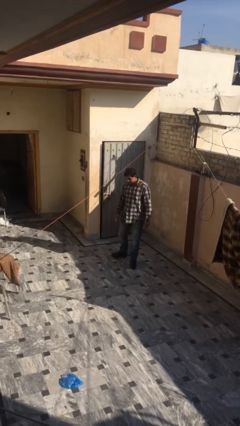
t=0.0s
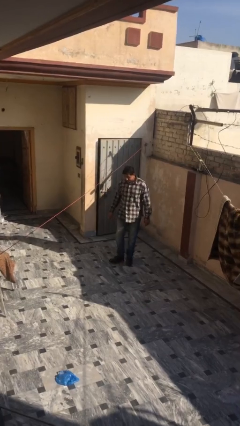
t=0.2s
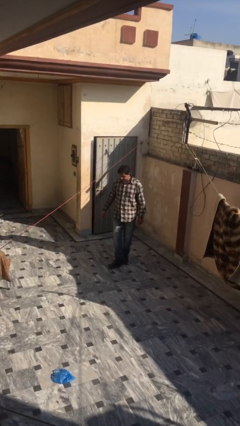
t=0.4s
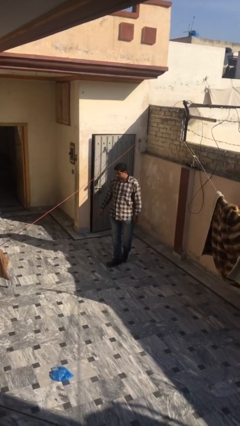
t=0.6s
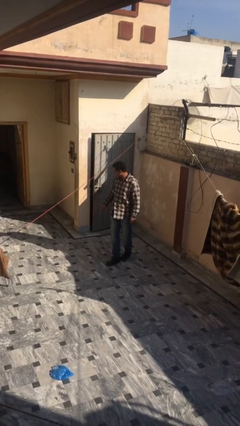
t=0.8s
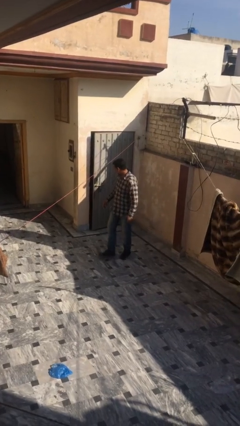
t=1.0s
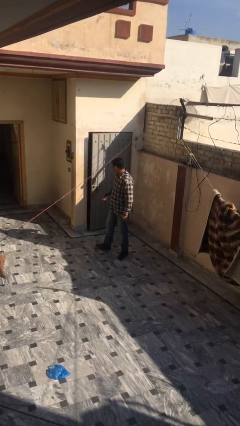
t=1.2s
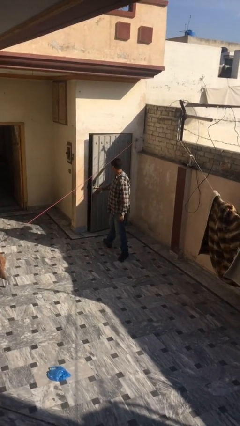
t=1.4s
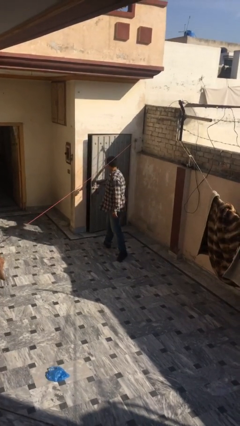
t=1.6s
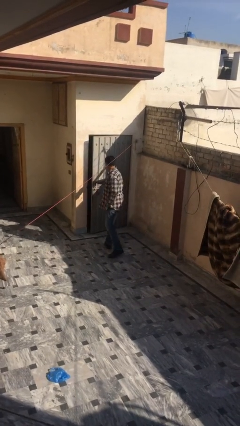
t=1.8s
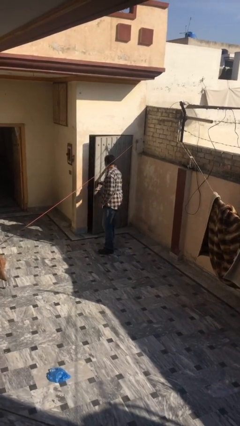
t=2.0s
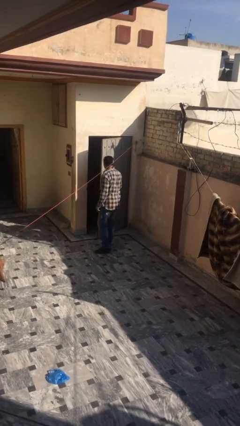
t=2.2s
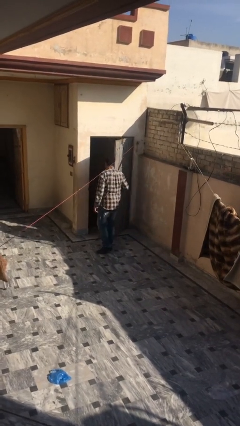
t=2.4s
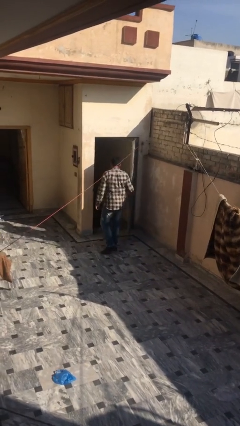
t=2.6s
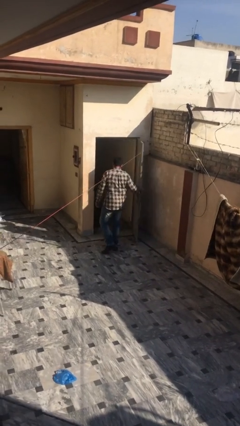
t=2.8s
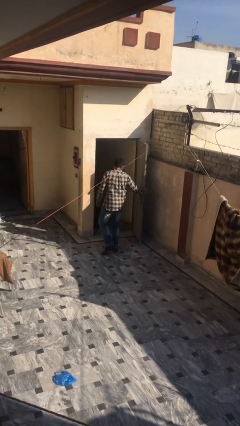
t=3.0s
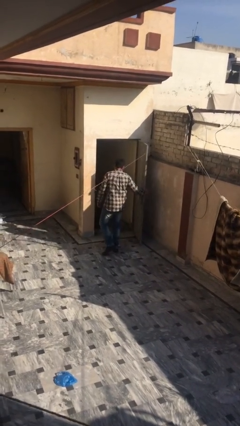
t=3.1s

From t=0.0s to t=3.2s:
person opens facility door

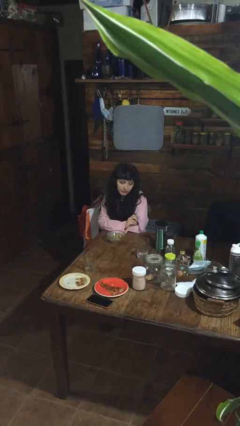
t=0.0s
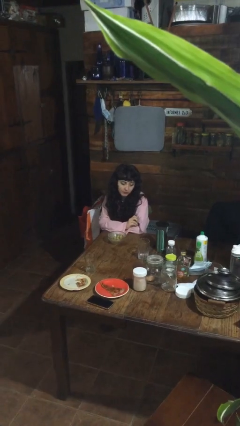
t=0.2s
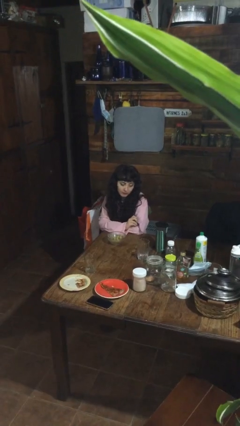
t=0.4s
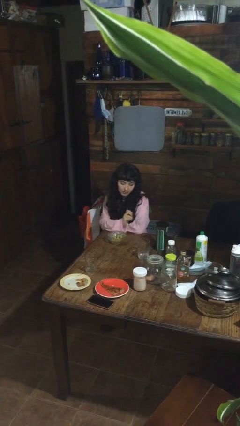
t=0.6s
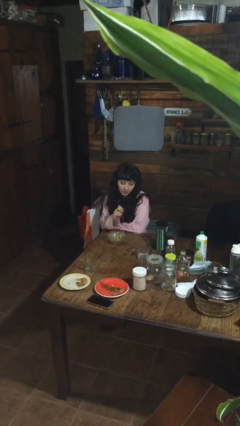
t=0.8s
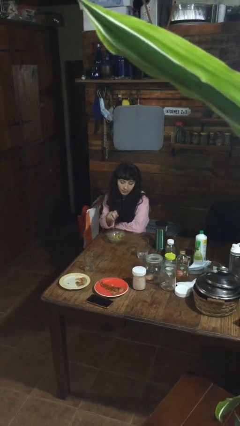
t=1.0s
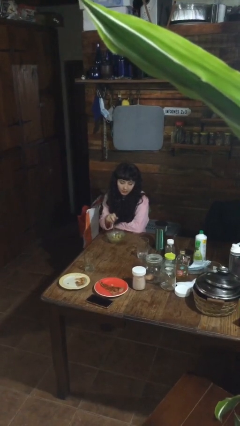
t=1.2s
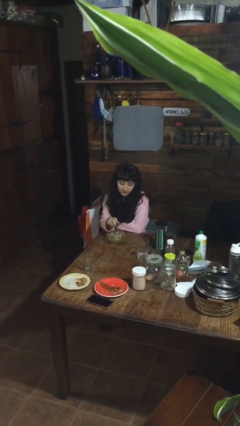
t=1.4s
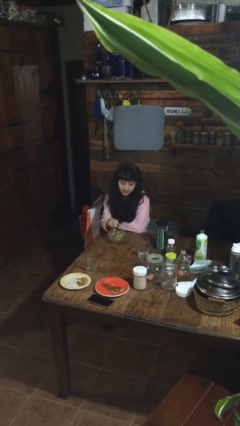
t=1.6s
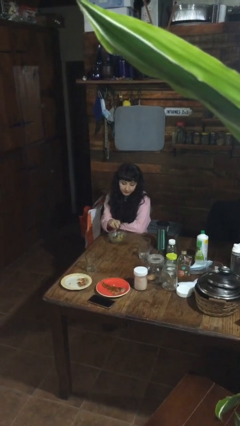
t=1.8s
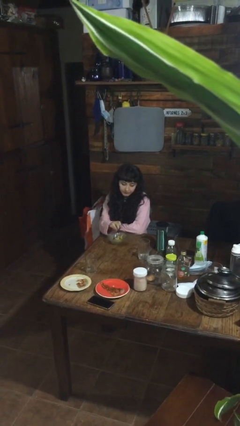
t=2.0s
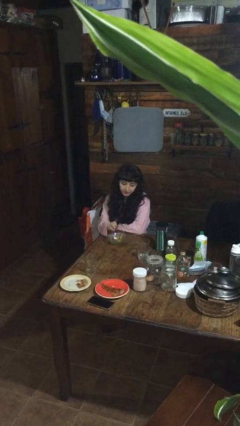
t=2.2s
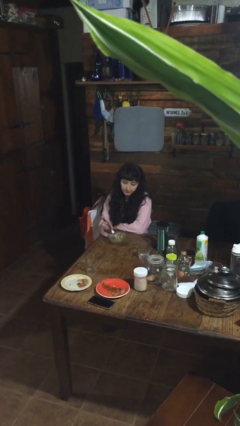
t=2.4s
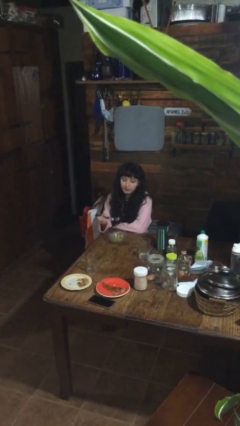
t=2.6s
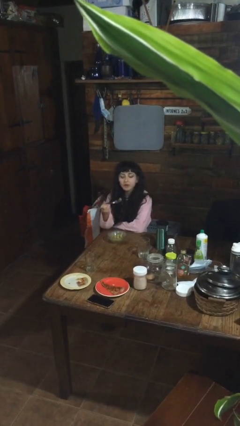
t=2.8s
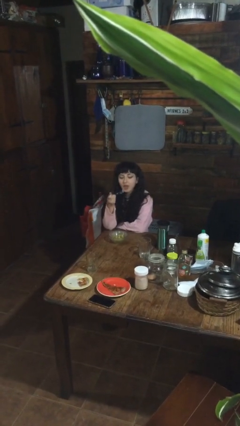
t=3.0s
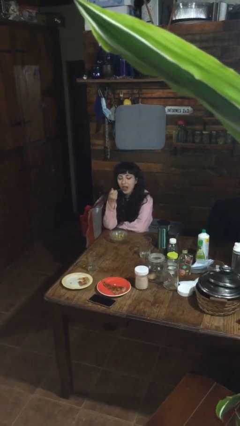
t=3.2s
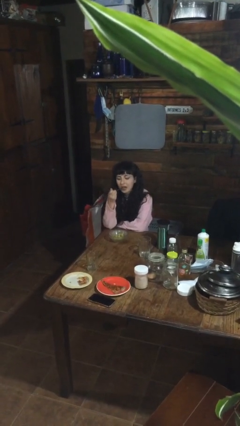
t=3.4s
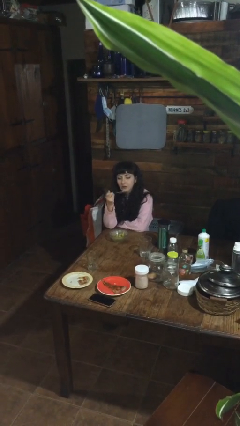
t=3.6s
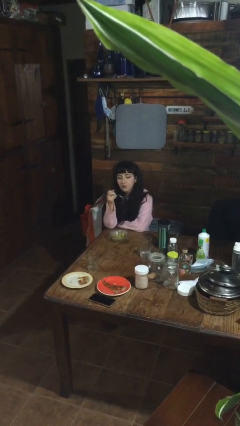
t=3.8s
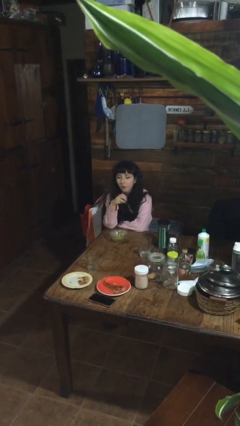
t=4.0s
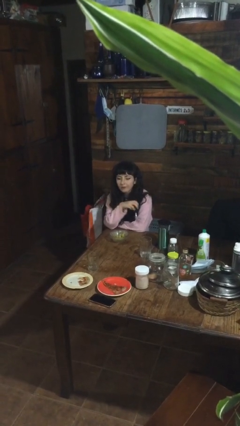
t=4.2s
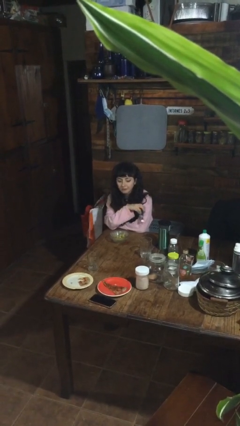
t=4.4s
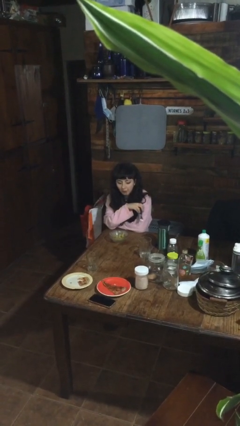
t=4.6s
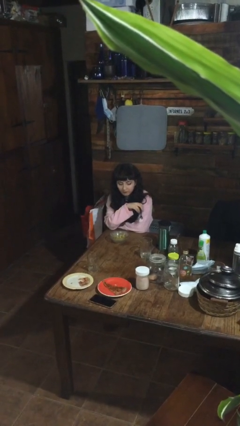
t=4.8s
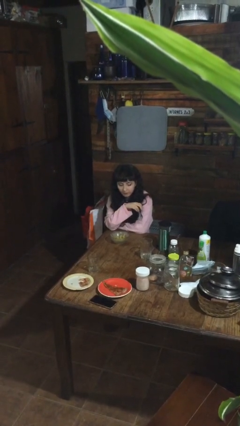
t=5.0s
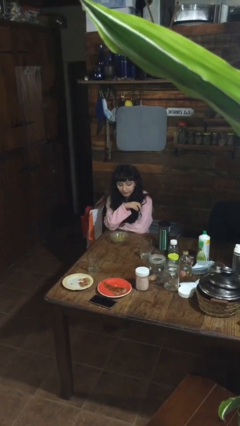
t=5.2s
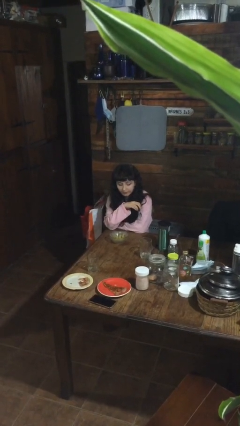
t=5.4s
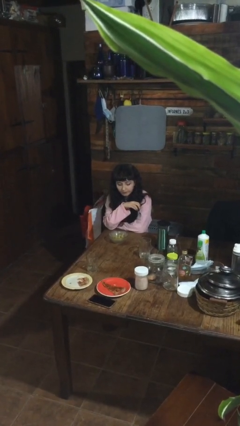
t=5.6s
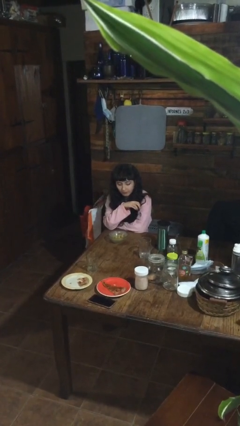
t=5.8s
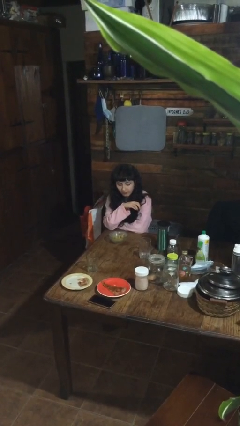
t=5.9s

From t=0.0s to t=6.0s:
person eats with utensil

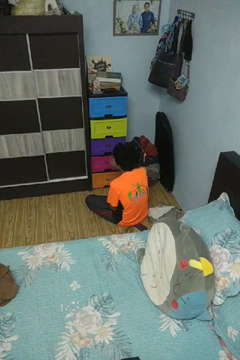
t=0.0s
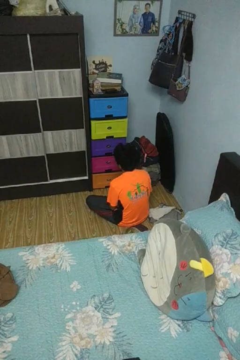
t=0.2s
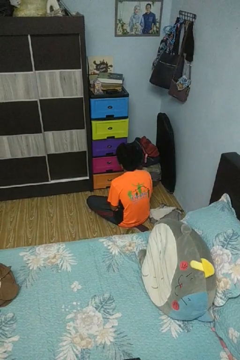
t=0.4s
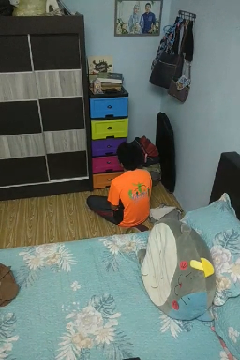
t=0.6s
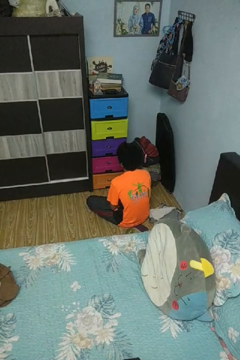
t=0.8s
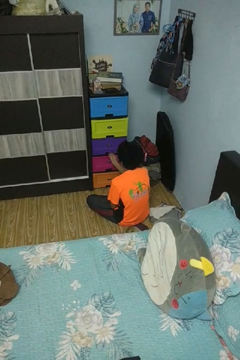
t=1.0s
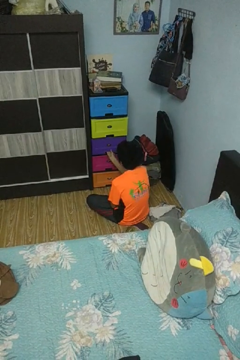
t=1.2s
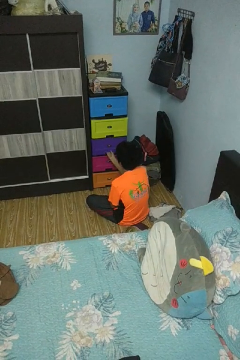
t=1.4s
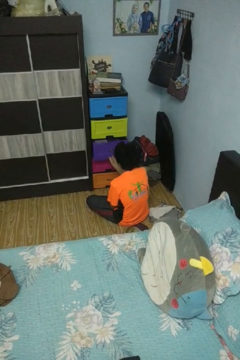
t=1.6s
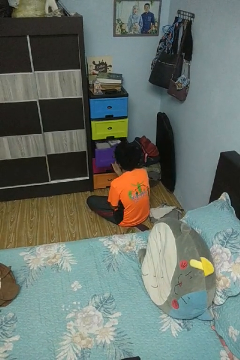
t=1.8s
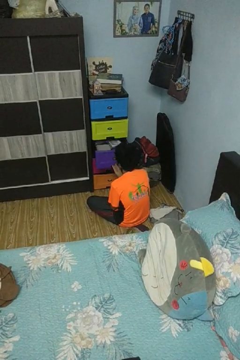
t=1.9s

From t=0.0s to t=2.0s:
person opens dresser drawer

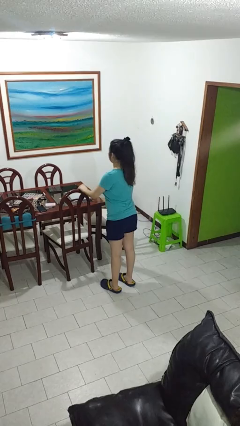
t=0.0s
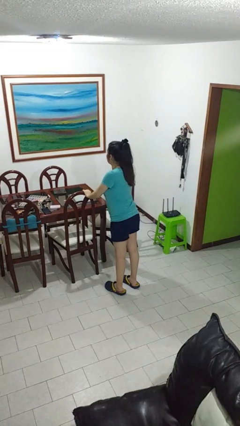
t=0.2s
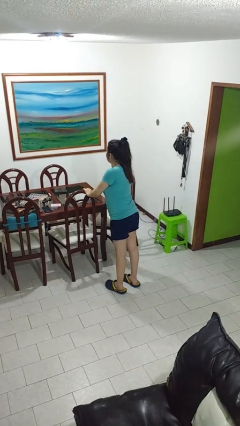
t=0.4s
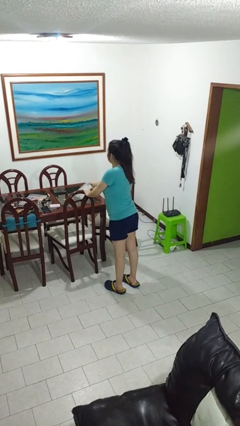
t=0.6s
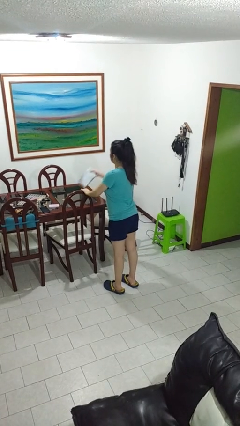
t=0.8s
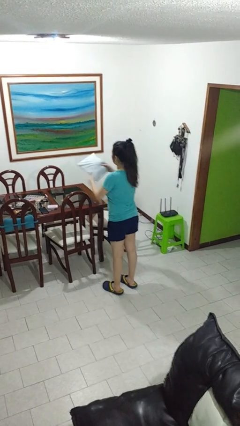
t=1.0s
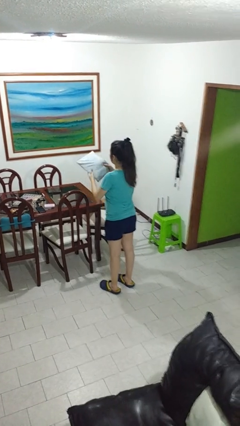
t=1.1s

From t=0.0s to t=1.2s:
person picks up object from table

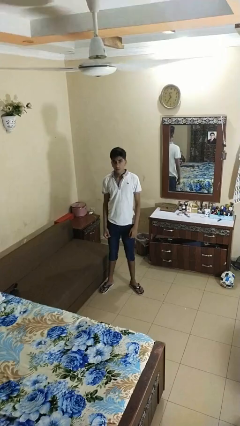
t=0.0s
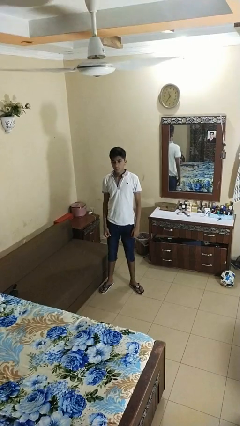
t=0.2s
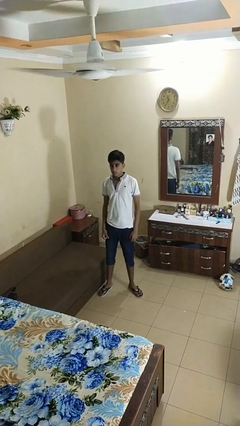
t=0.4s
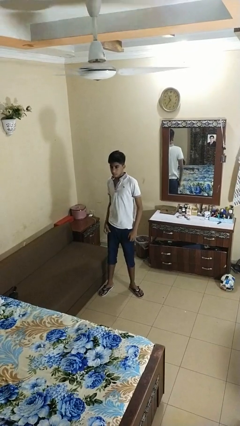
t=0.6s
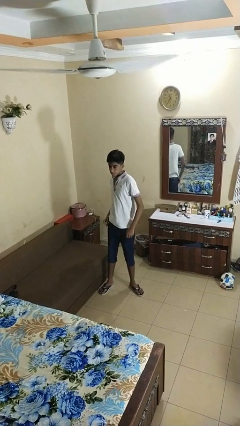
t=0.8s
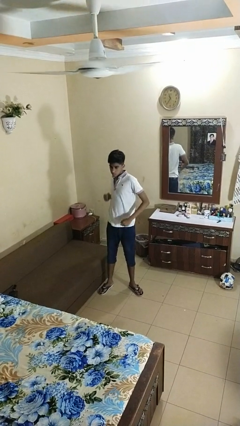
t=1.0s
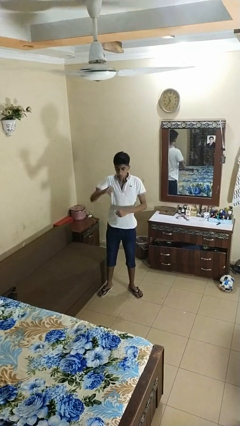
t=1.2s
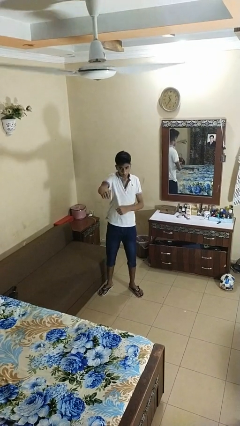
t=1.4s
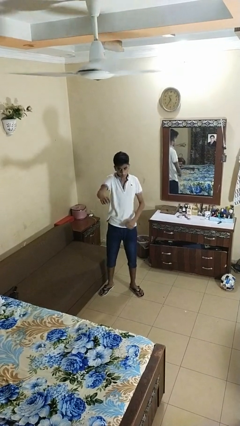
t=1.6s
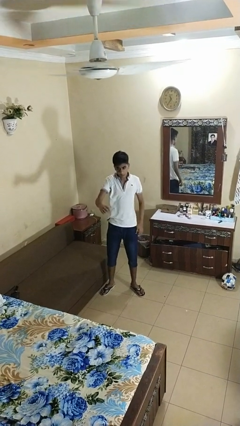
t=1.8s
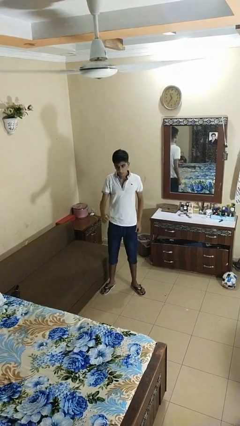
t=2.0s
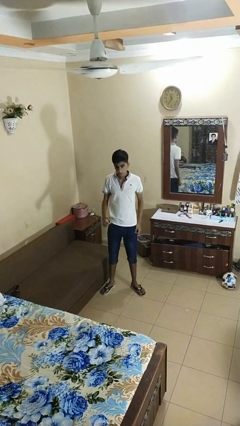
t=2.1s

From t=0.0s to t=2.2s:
person punches

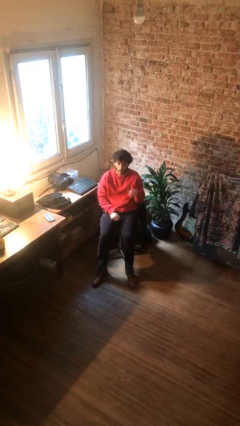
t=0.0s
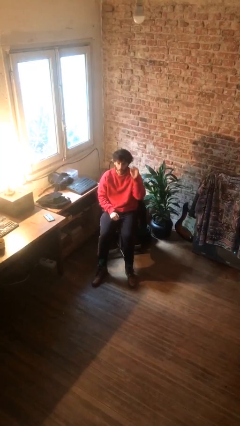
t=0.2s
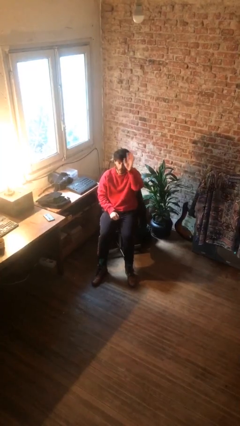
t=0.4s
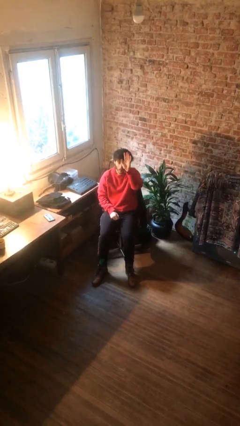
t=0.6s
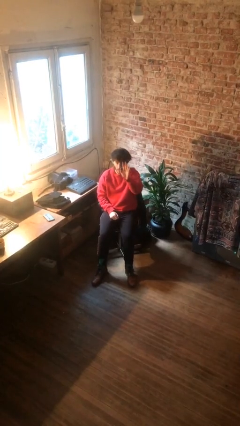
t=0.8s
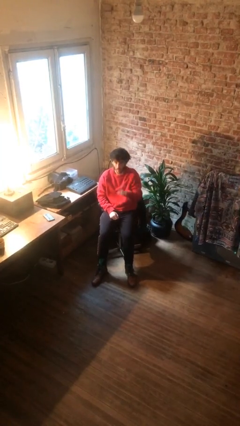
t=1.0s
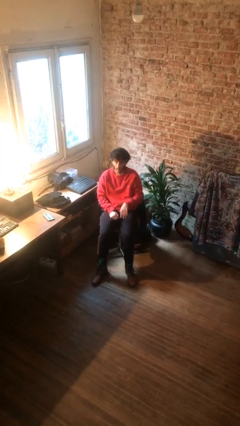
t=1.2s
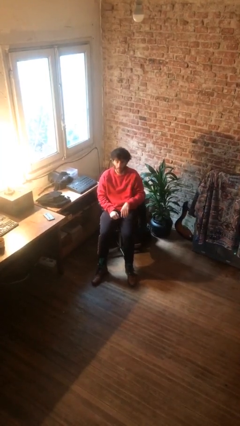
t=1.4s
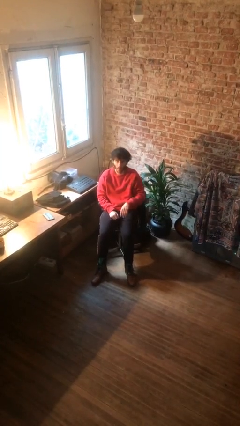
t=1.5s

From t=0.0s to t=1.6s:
person gestures swipe down

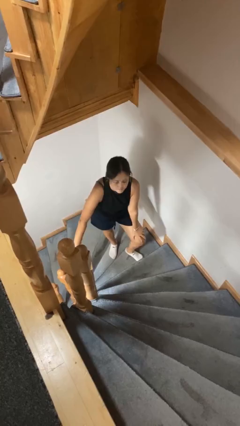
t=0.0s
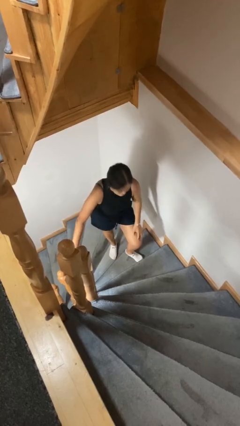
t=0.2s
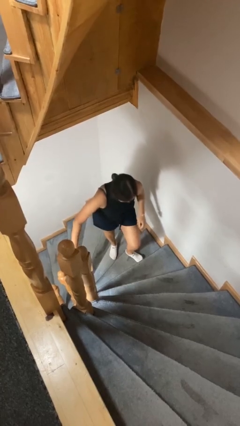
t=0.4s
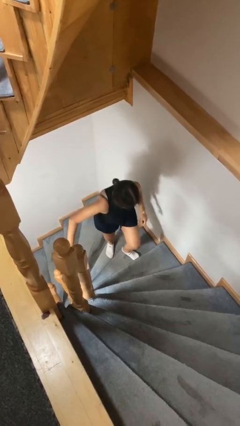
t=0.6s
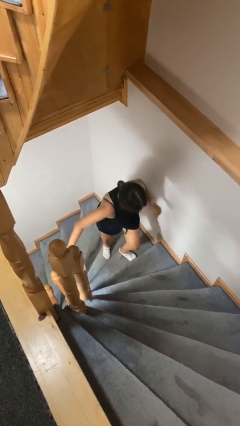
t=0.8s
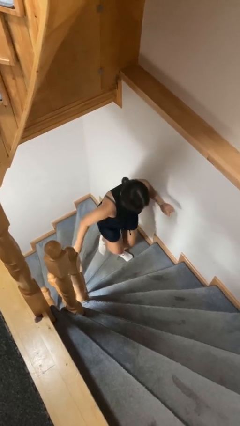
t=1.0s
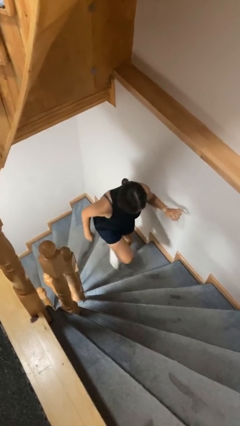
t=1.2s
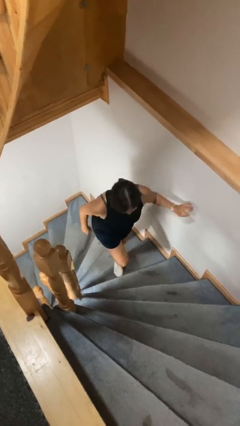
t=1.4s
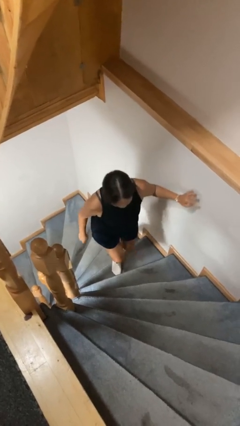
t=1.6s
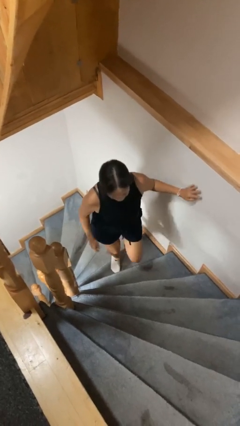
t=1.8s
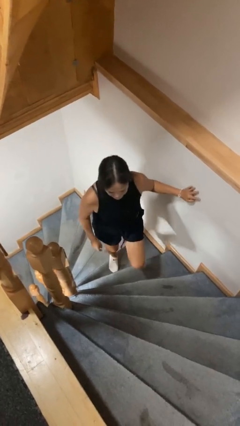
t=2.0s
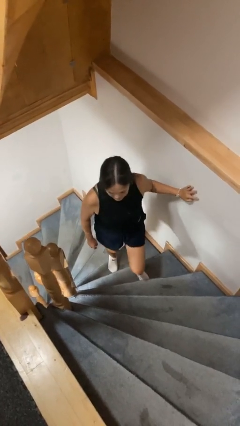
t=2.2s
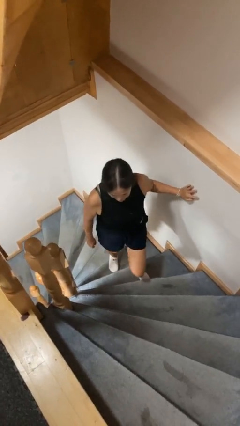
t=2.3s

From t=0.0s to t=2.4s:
person climbs up stairs
